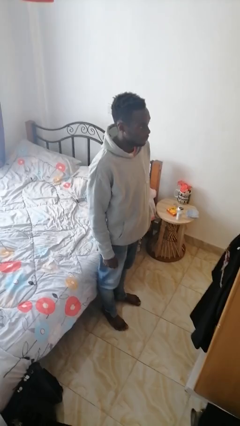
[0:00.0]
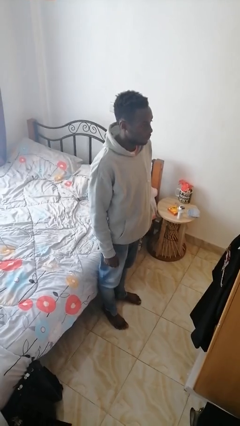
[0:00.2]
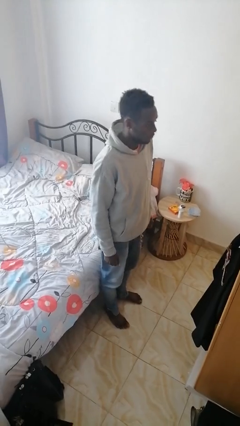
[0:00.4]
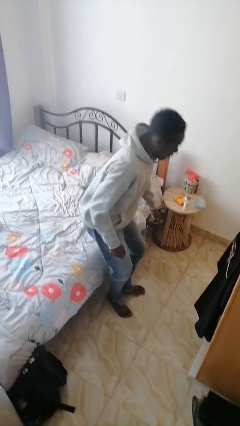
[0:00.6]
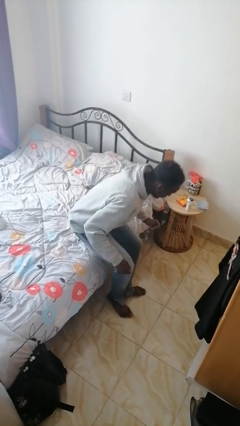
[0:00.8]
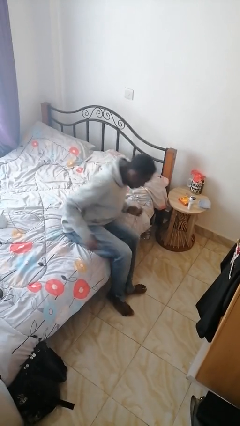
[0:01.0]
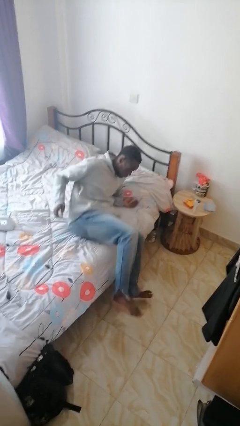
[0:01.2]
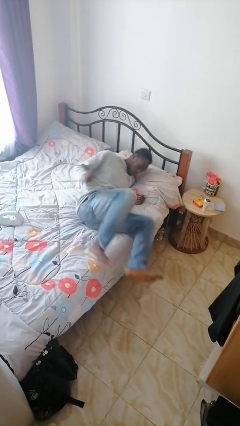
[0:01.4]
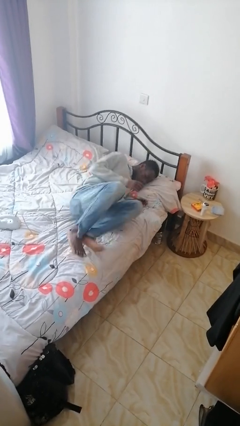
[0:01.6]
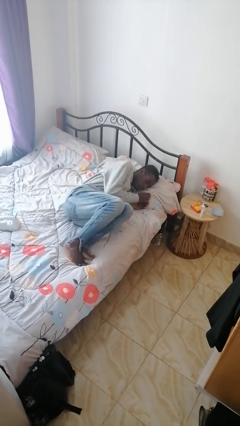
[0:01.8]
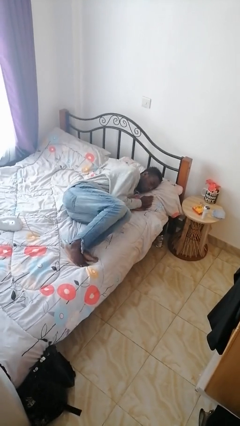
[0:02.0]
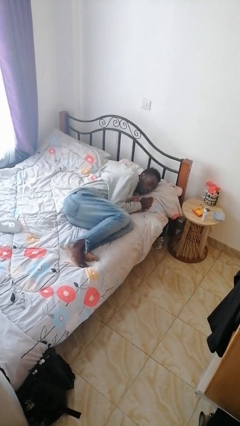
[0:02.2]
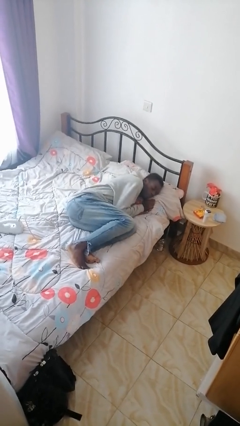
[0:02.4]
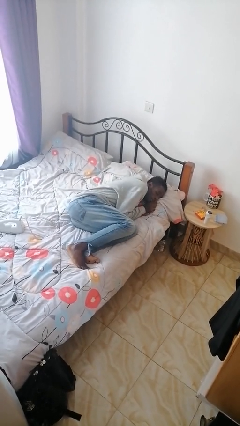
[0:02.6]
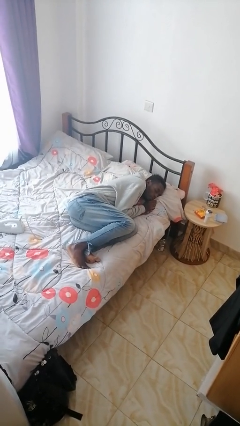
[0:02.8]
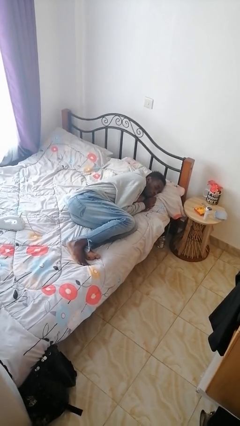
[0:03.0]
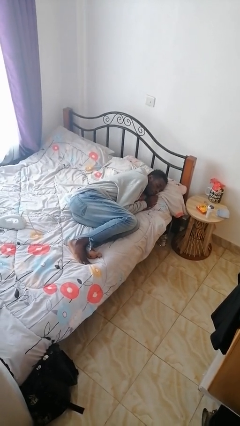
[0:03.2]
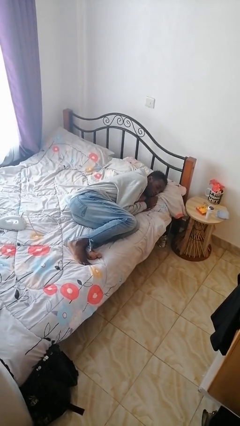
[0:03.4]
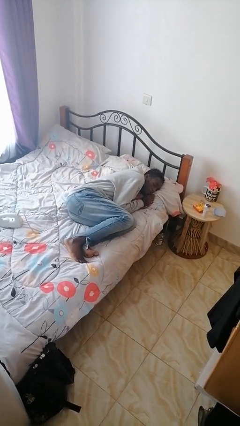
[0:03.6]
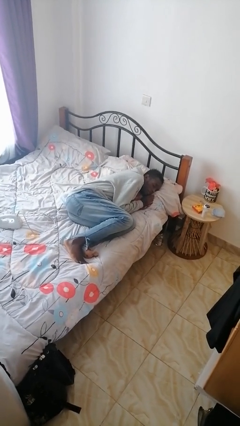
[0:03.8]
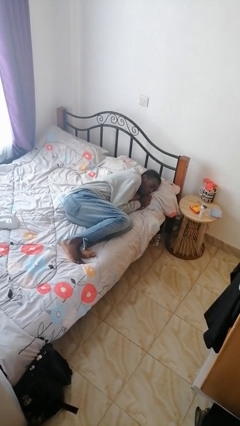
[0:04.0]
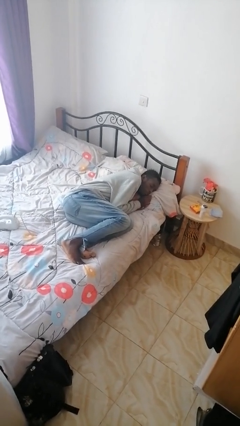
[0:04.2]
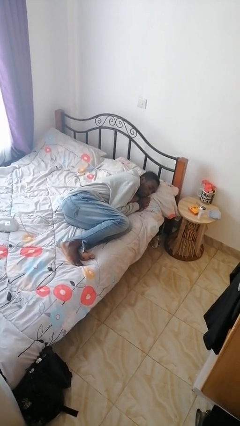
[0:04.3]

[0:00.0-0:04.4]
person lies down on bed

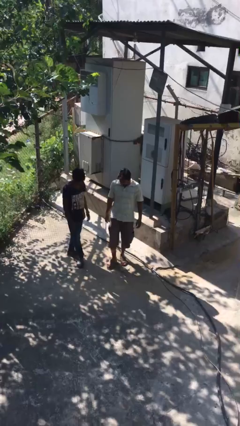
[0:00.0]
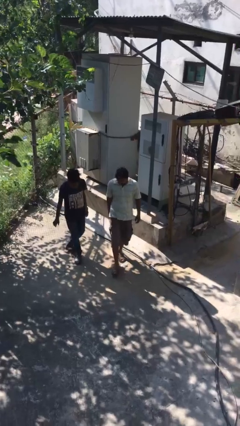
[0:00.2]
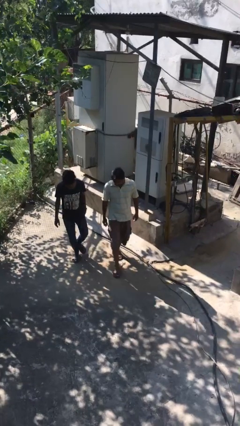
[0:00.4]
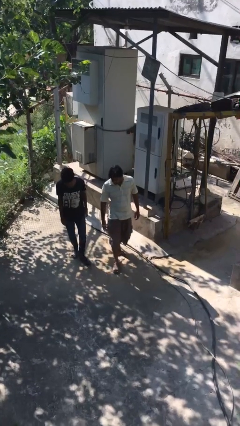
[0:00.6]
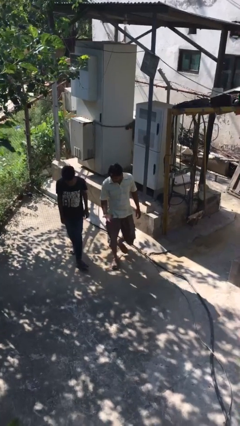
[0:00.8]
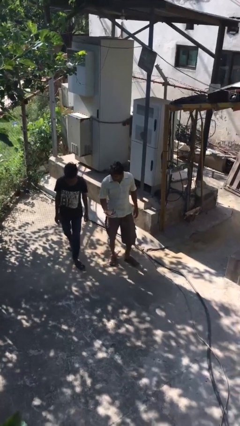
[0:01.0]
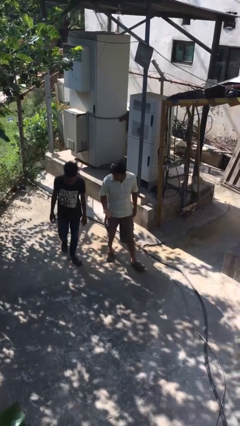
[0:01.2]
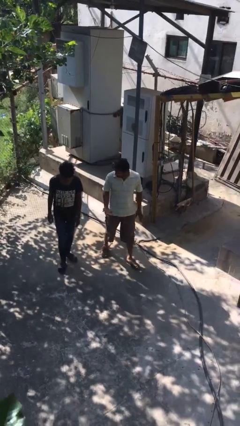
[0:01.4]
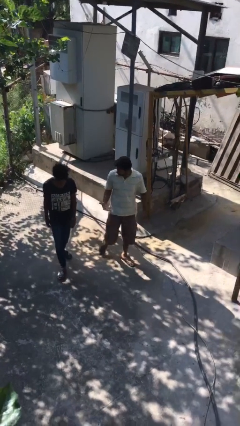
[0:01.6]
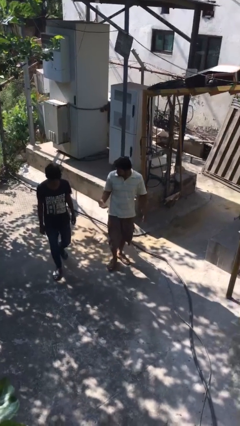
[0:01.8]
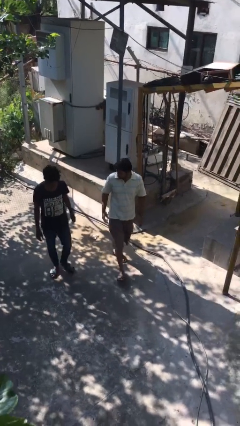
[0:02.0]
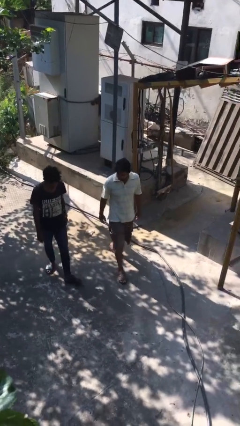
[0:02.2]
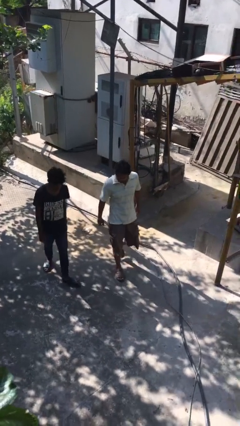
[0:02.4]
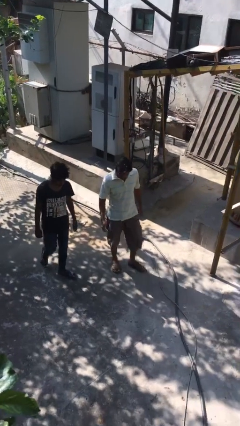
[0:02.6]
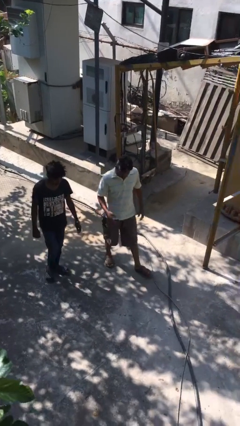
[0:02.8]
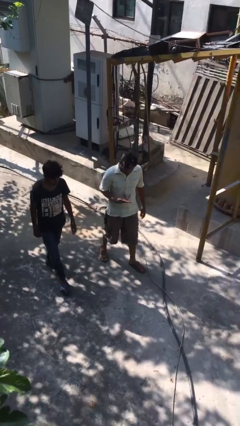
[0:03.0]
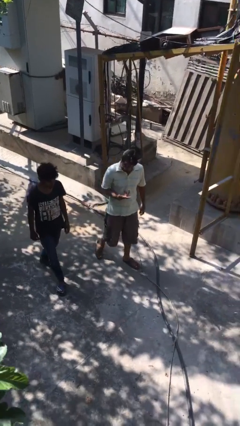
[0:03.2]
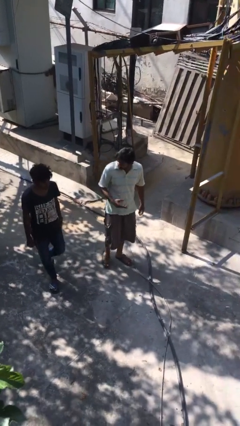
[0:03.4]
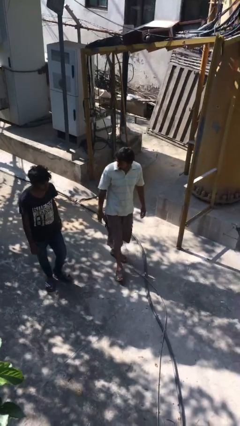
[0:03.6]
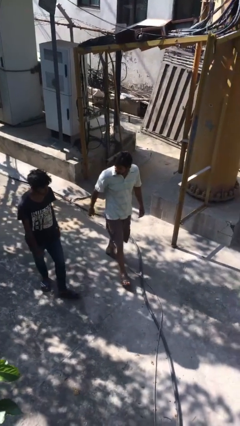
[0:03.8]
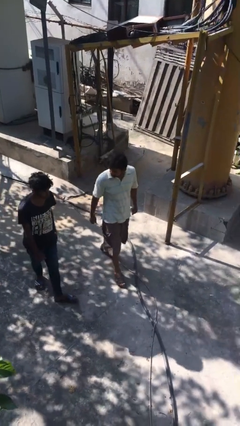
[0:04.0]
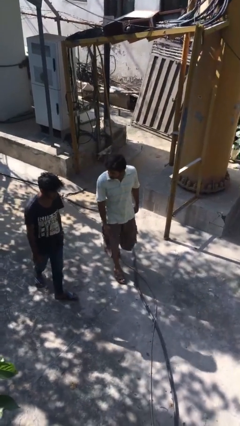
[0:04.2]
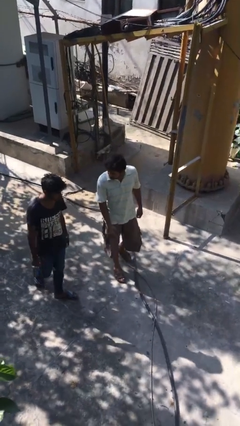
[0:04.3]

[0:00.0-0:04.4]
person talks to person

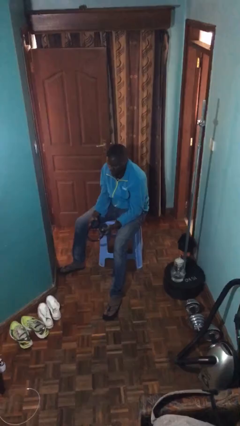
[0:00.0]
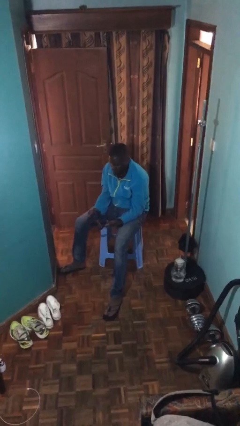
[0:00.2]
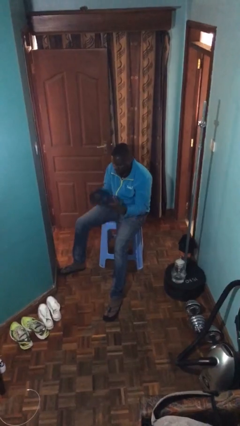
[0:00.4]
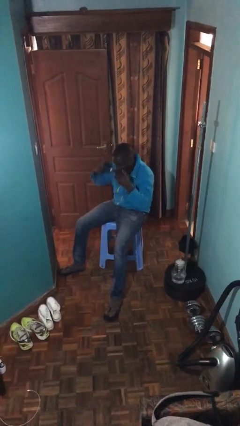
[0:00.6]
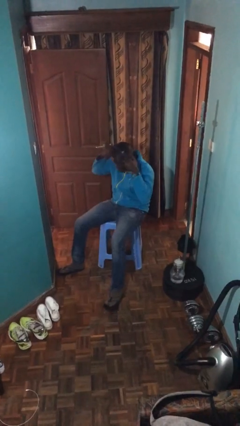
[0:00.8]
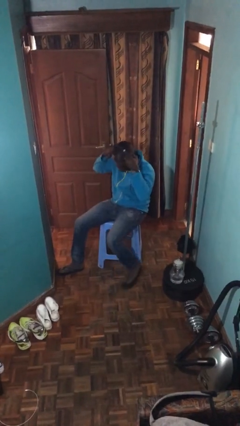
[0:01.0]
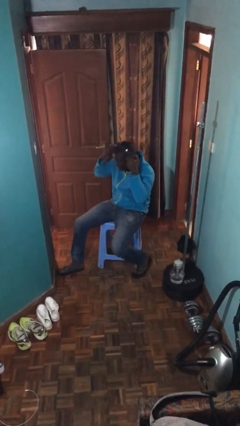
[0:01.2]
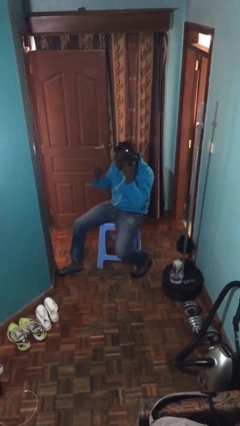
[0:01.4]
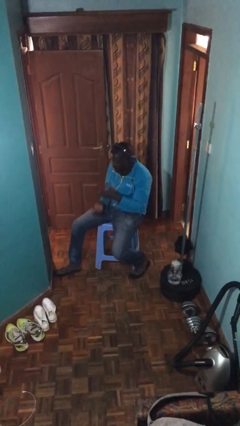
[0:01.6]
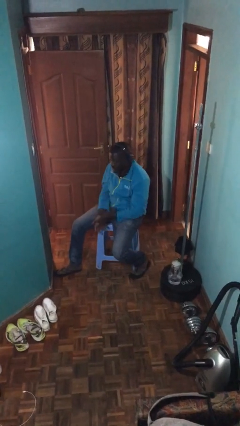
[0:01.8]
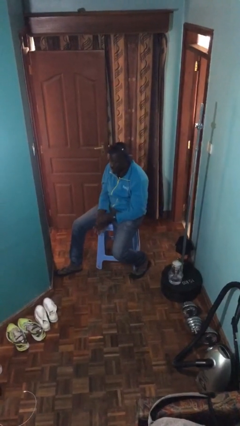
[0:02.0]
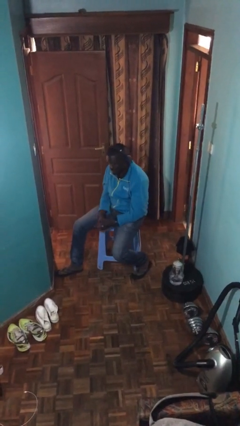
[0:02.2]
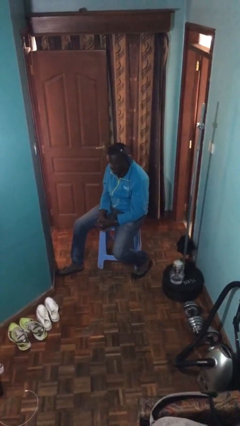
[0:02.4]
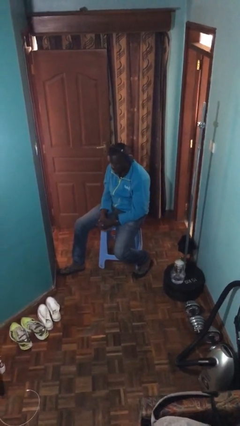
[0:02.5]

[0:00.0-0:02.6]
person puts on headphones

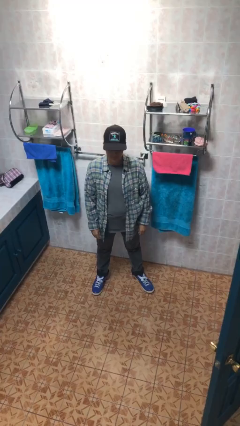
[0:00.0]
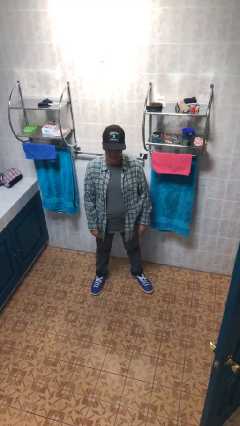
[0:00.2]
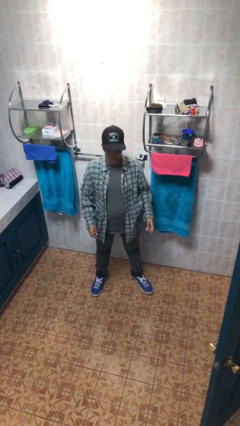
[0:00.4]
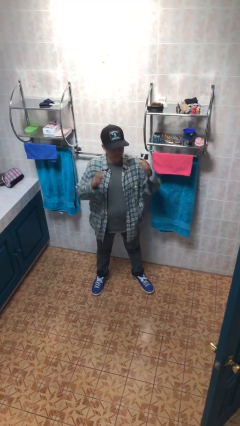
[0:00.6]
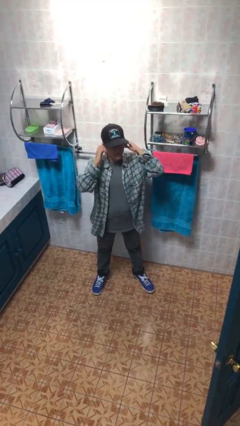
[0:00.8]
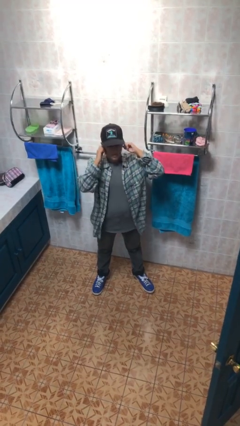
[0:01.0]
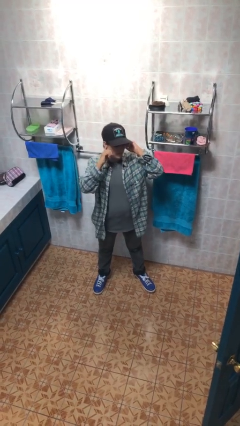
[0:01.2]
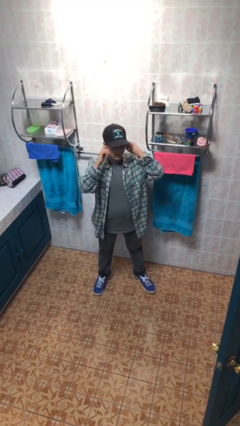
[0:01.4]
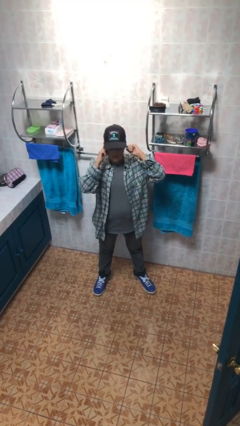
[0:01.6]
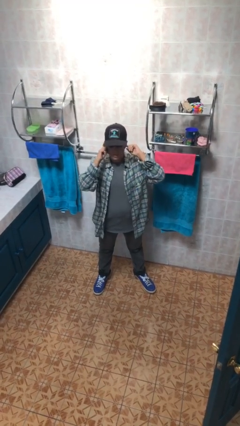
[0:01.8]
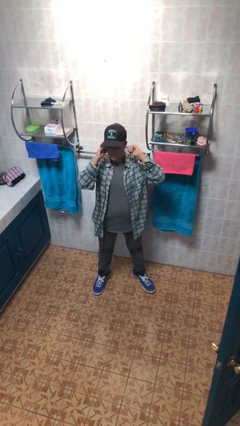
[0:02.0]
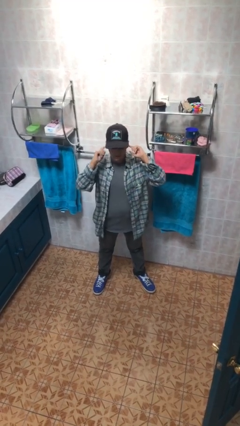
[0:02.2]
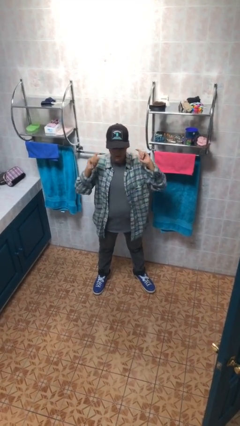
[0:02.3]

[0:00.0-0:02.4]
person puts fingers in ear

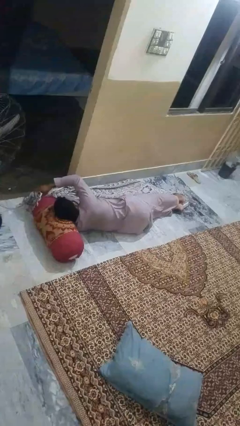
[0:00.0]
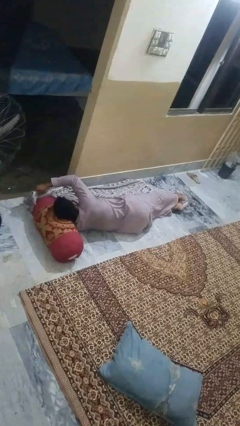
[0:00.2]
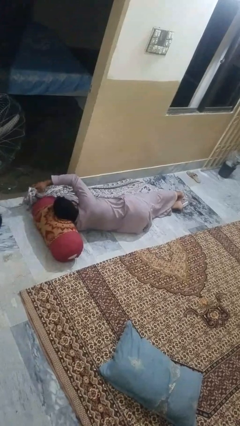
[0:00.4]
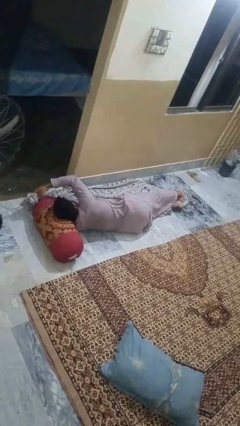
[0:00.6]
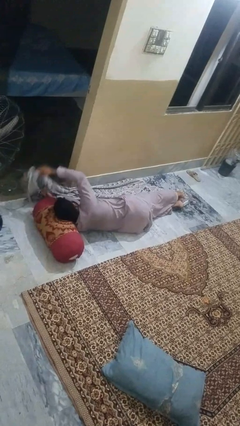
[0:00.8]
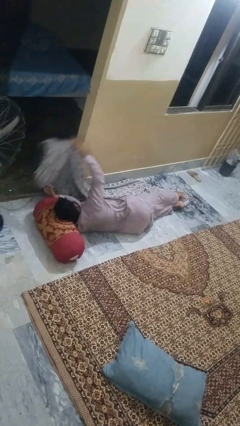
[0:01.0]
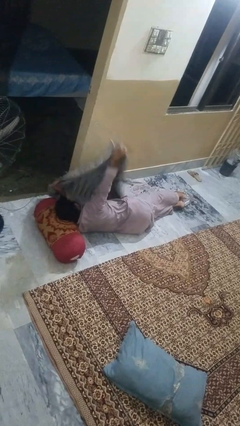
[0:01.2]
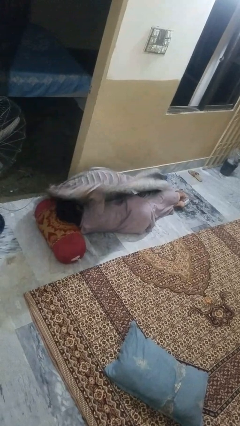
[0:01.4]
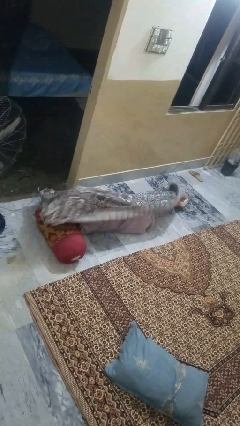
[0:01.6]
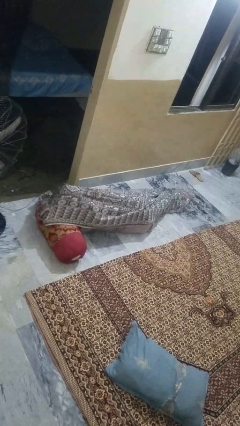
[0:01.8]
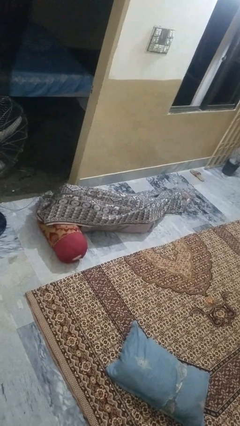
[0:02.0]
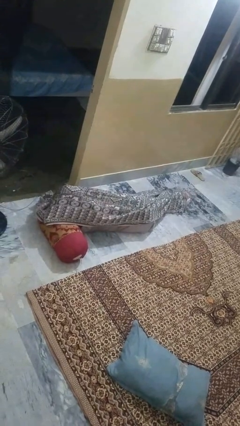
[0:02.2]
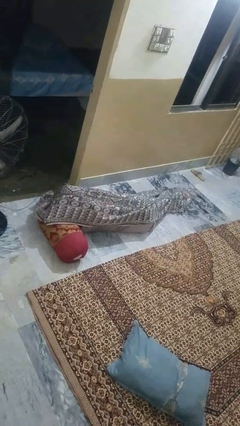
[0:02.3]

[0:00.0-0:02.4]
person covers with blanket

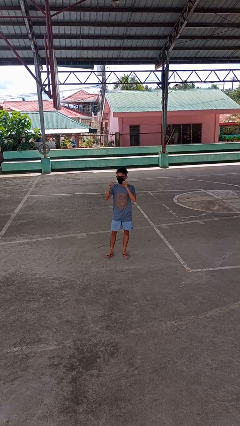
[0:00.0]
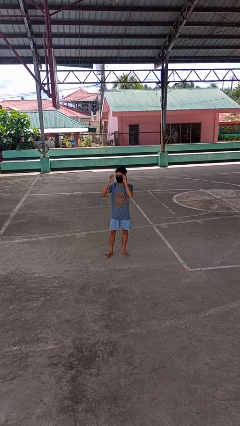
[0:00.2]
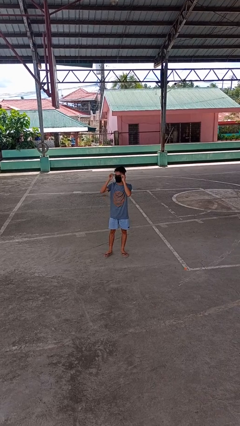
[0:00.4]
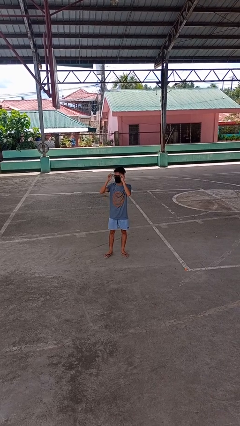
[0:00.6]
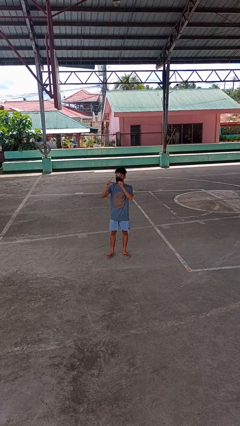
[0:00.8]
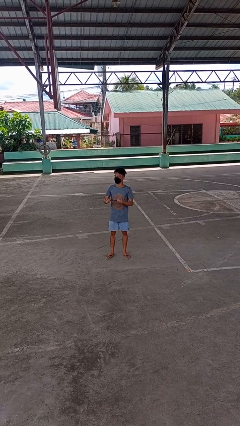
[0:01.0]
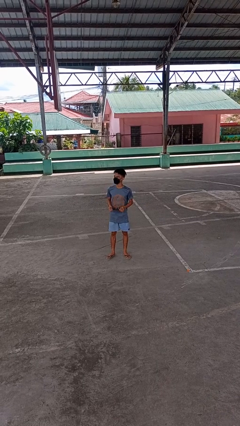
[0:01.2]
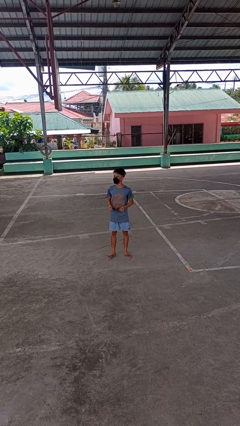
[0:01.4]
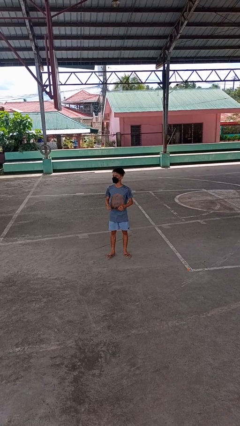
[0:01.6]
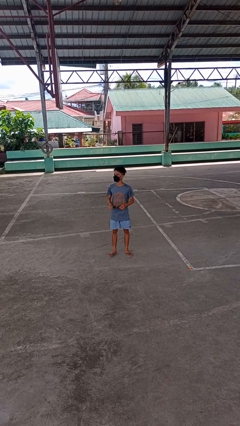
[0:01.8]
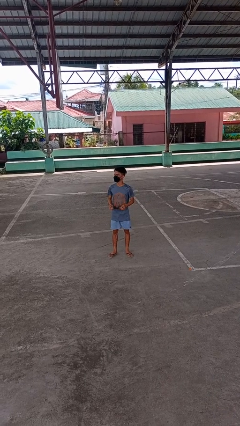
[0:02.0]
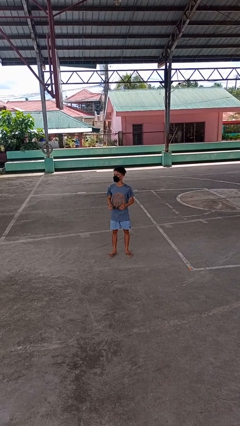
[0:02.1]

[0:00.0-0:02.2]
person takes off glasses
